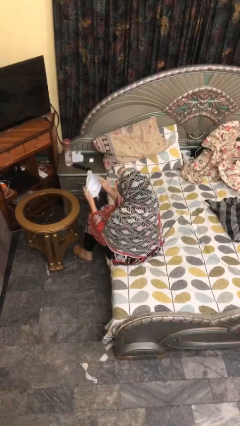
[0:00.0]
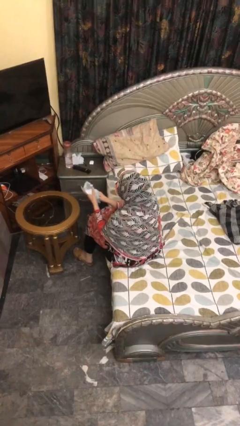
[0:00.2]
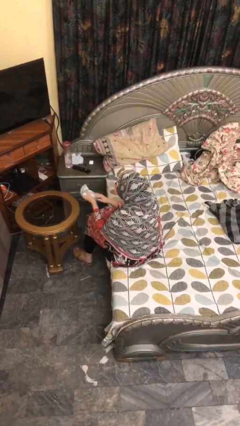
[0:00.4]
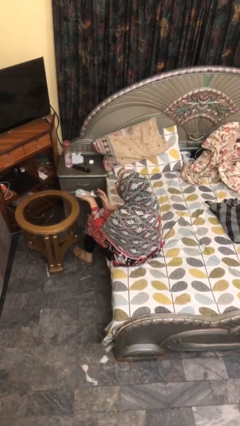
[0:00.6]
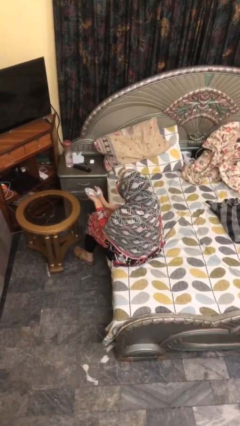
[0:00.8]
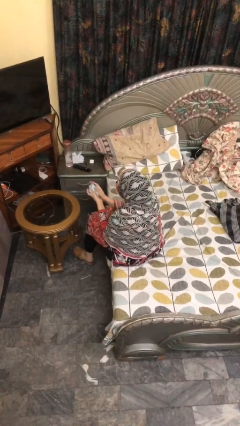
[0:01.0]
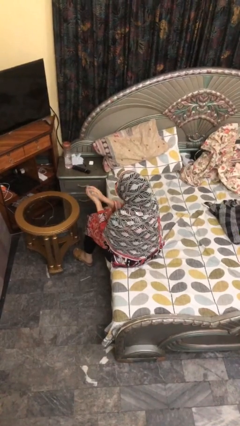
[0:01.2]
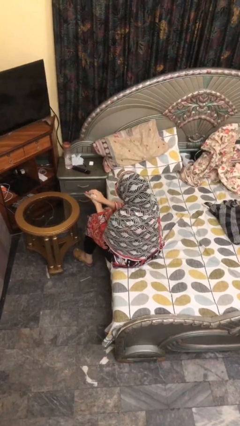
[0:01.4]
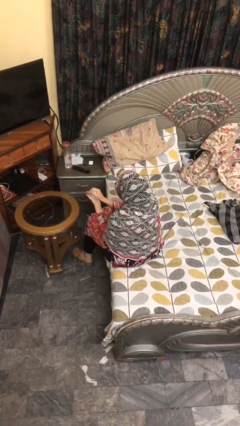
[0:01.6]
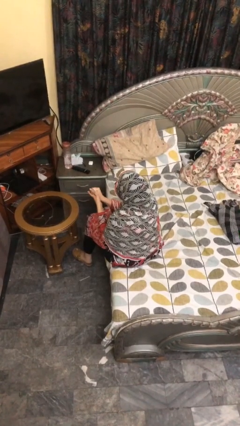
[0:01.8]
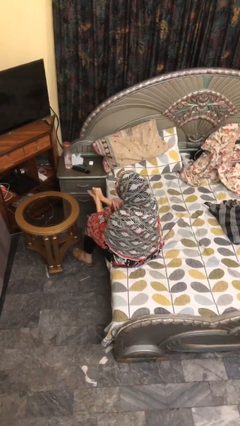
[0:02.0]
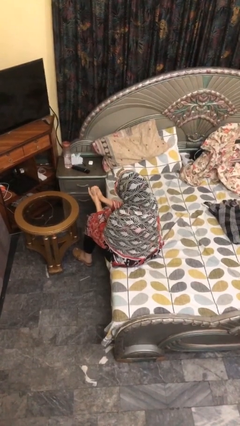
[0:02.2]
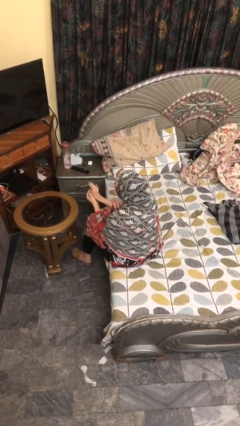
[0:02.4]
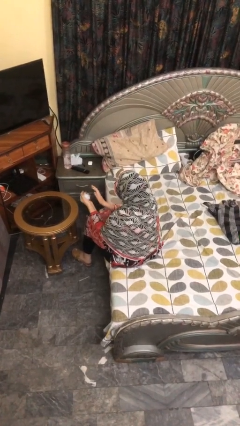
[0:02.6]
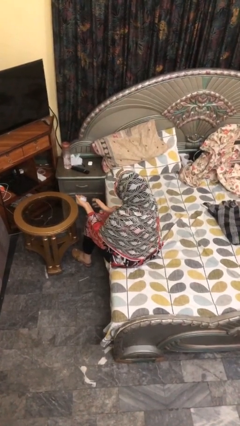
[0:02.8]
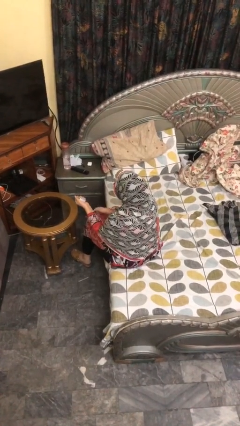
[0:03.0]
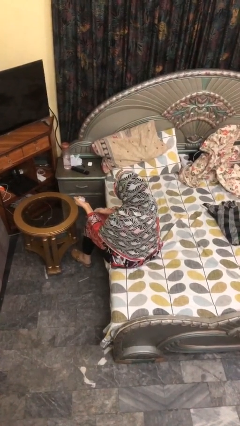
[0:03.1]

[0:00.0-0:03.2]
person crumples paper

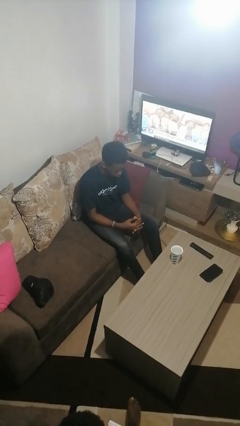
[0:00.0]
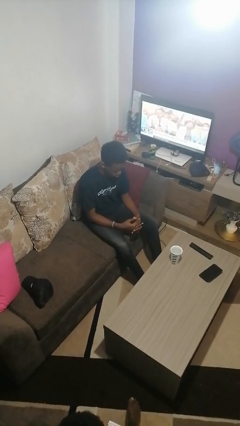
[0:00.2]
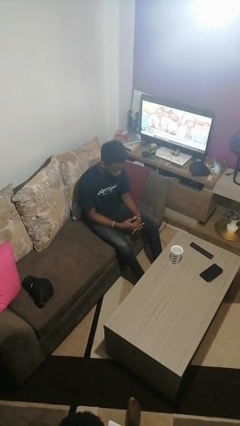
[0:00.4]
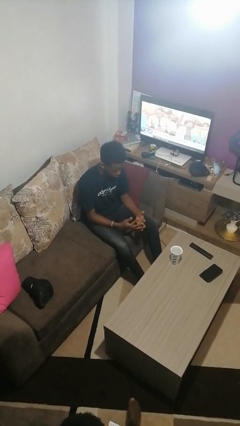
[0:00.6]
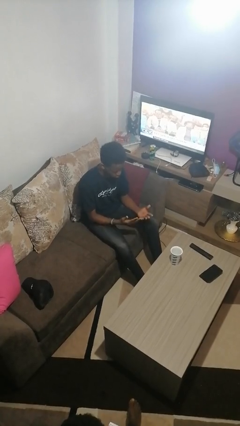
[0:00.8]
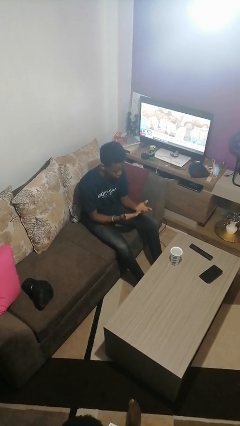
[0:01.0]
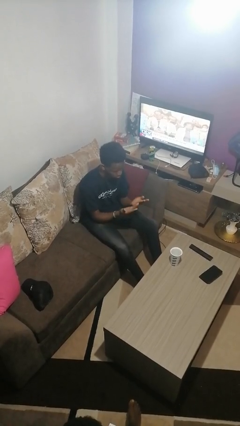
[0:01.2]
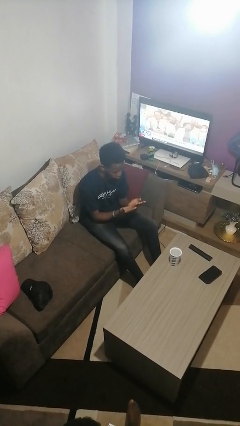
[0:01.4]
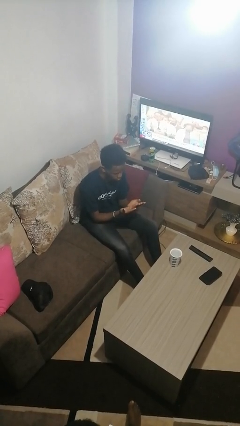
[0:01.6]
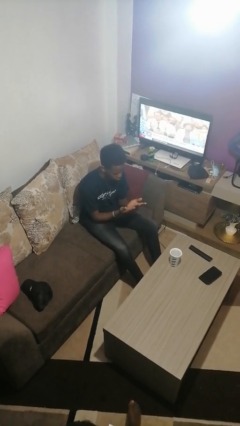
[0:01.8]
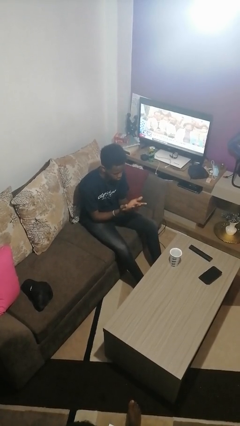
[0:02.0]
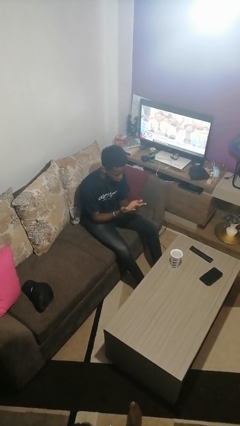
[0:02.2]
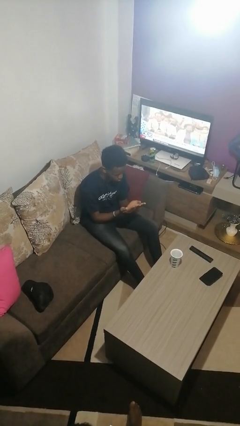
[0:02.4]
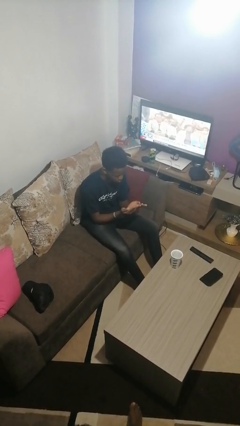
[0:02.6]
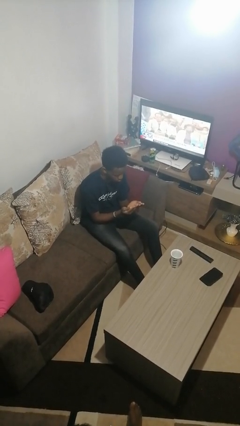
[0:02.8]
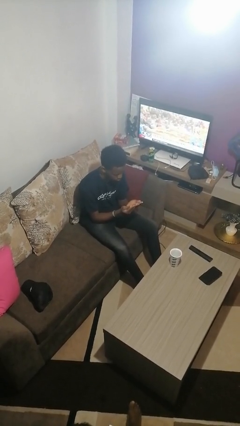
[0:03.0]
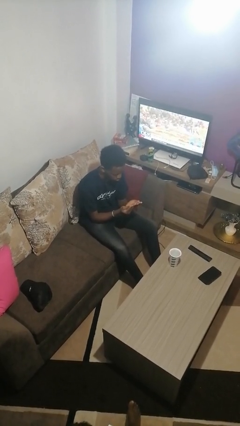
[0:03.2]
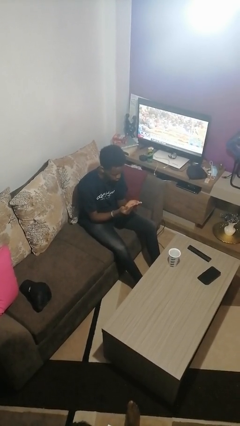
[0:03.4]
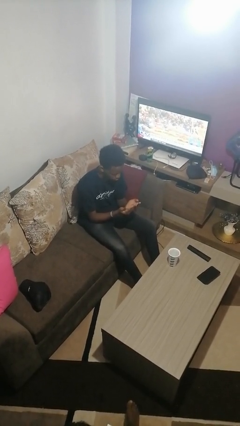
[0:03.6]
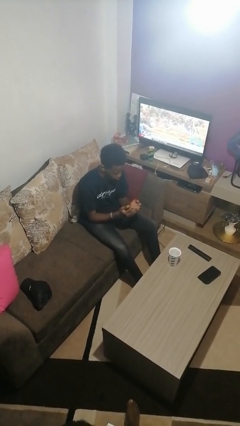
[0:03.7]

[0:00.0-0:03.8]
person looks at hands in lap

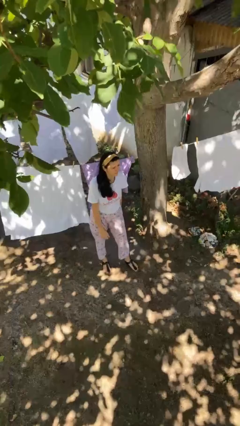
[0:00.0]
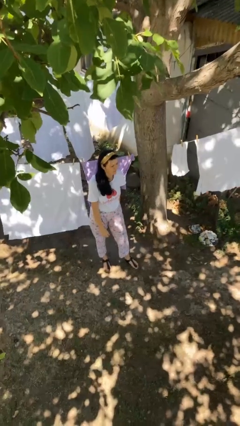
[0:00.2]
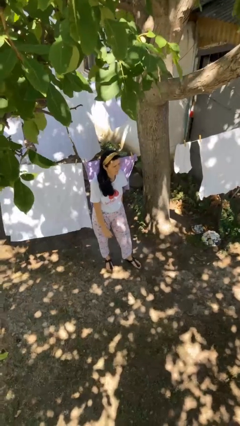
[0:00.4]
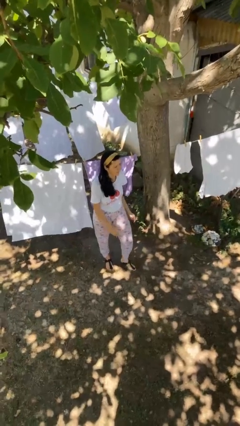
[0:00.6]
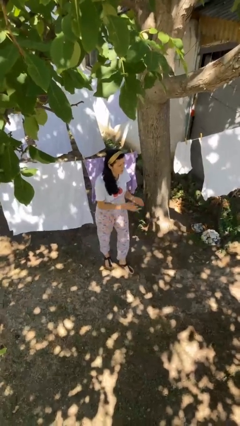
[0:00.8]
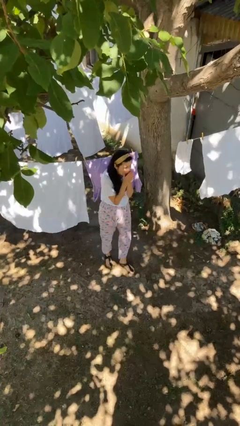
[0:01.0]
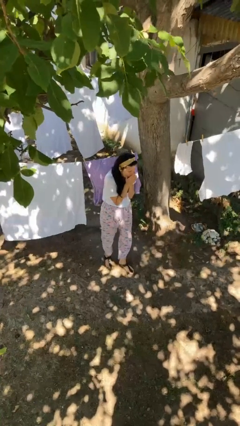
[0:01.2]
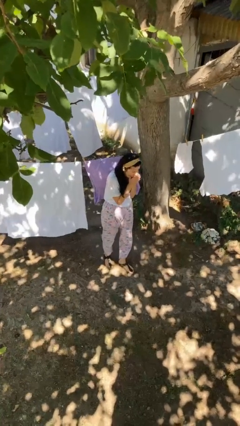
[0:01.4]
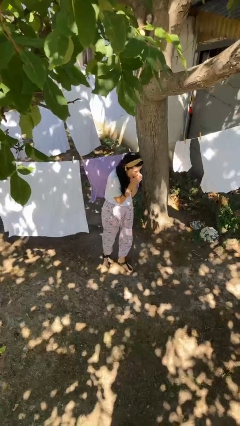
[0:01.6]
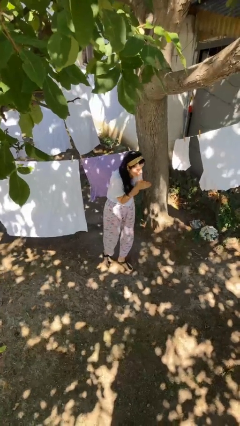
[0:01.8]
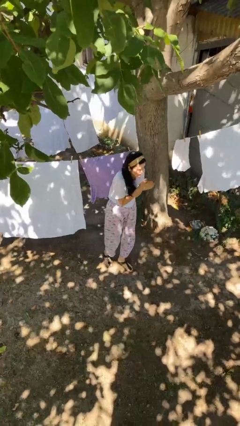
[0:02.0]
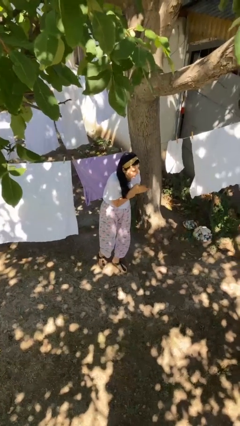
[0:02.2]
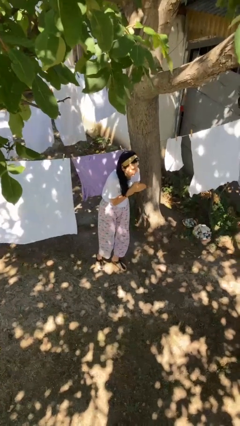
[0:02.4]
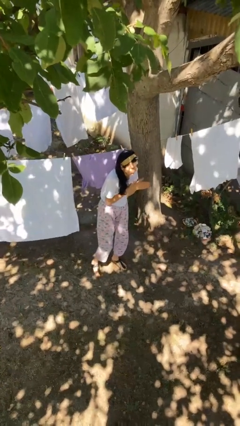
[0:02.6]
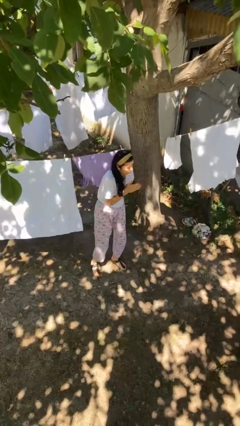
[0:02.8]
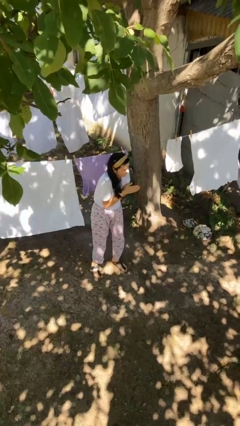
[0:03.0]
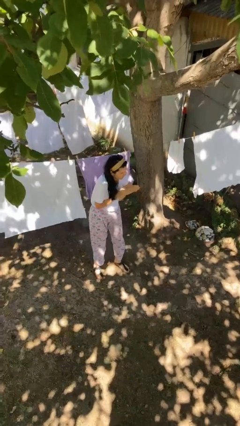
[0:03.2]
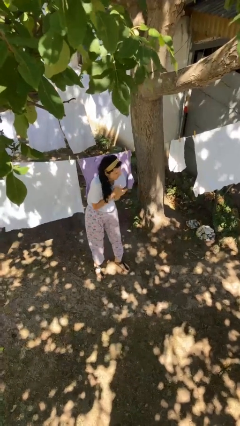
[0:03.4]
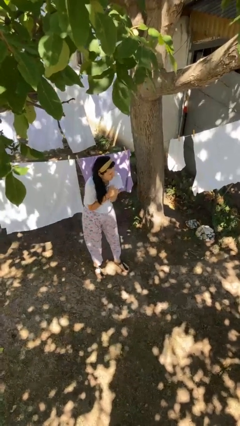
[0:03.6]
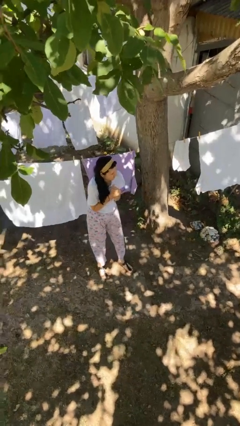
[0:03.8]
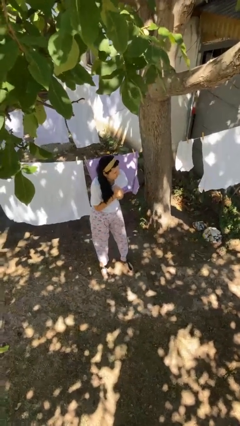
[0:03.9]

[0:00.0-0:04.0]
person blows into hands

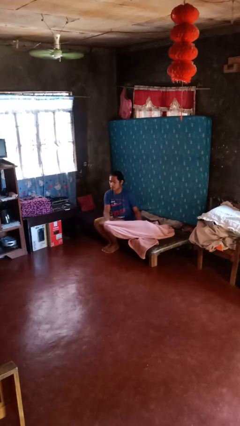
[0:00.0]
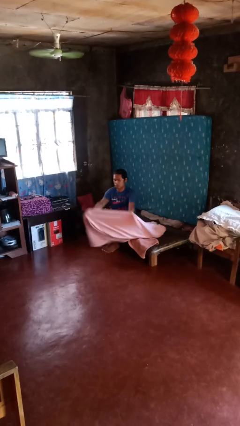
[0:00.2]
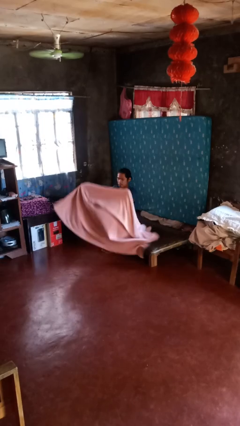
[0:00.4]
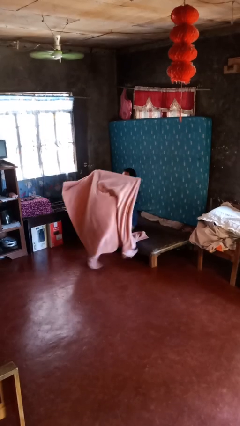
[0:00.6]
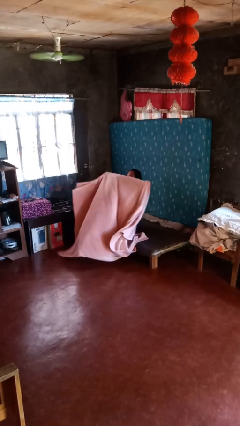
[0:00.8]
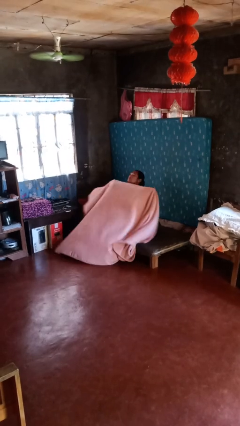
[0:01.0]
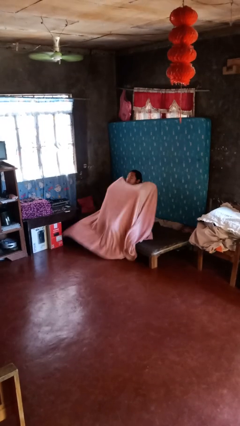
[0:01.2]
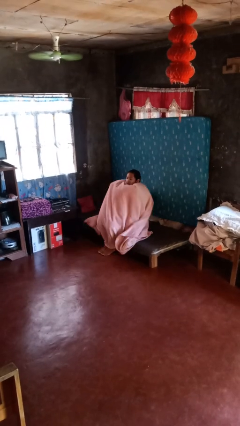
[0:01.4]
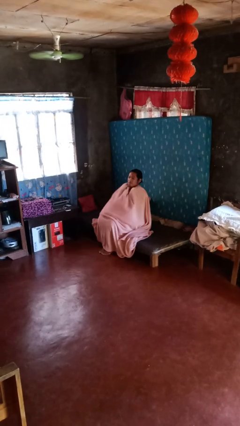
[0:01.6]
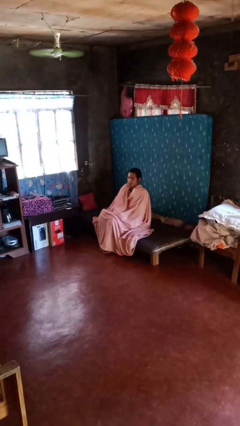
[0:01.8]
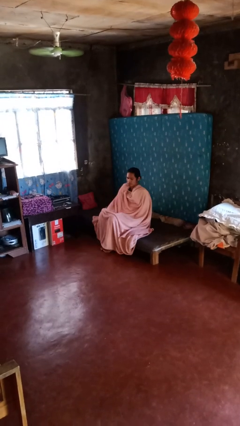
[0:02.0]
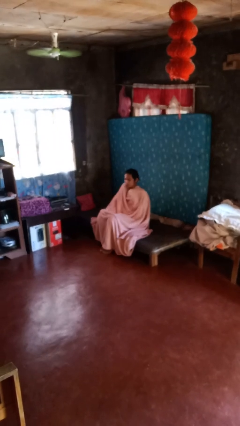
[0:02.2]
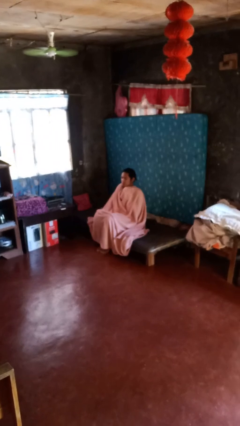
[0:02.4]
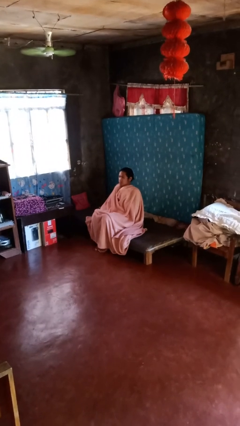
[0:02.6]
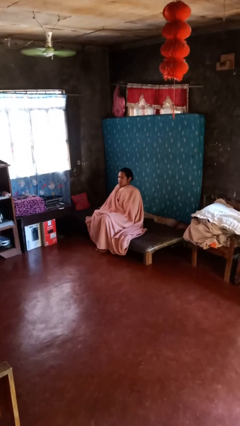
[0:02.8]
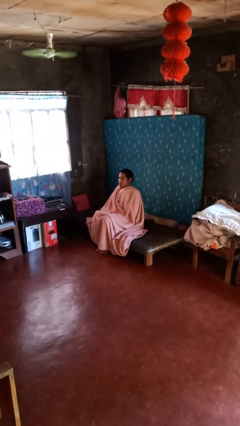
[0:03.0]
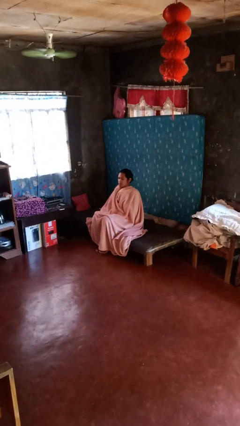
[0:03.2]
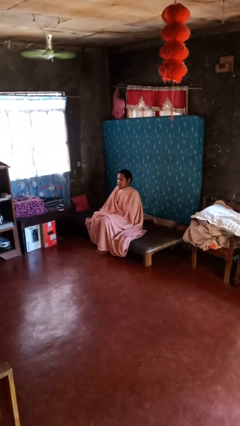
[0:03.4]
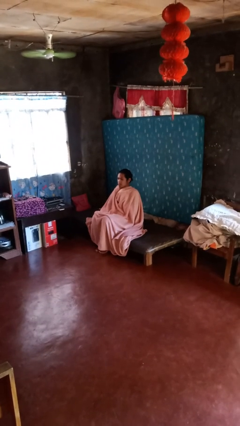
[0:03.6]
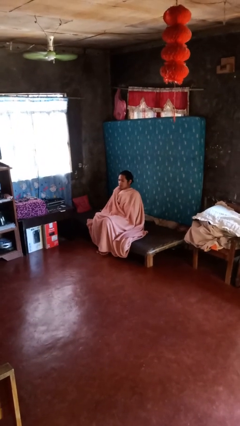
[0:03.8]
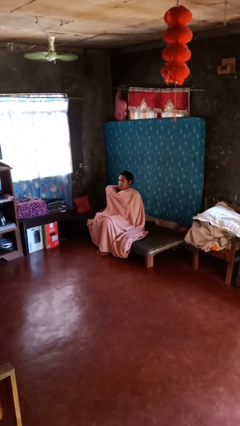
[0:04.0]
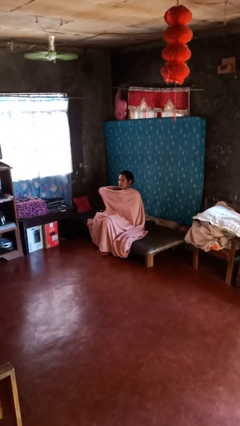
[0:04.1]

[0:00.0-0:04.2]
person covers with blanket

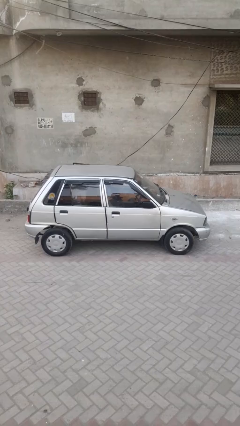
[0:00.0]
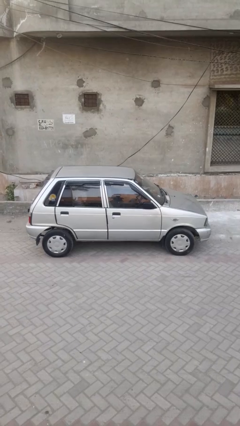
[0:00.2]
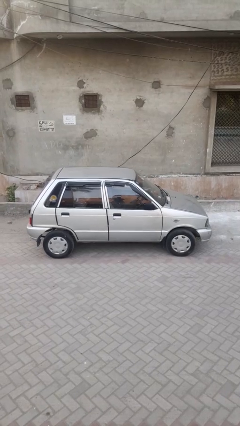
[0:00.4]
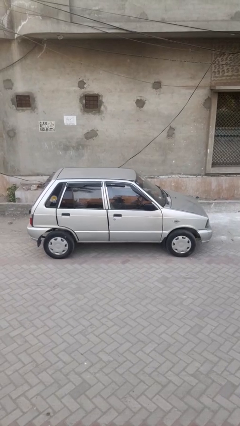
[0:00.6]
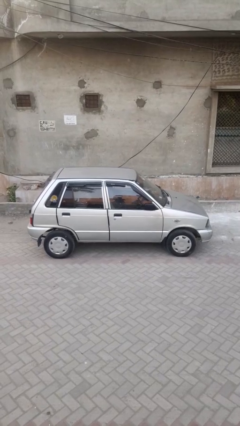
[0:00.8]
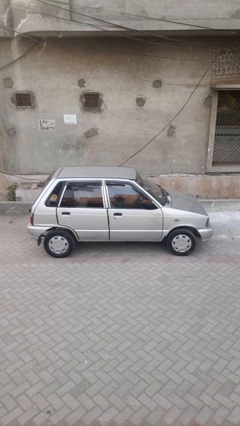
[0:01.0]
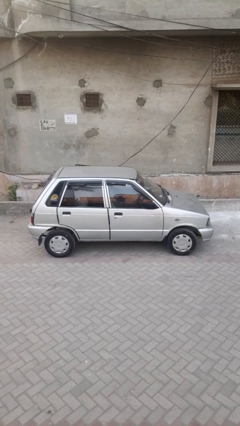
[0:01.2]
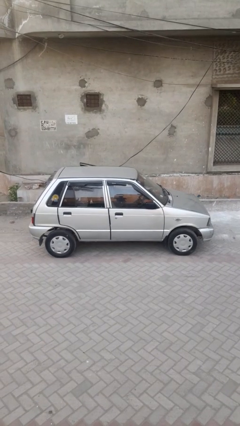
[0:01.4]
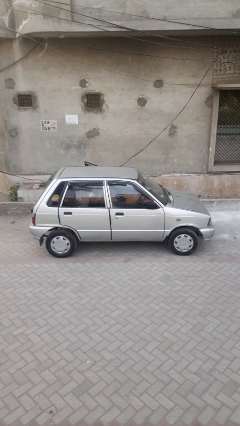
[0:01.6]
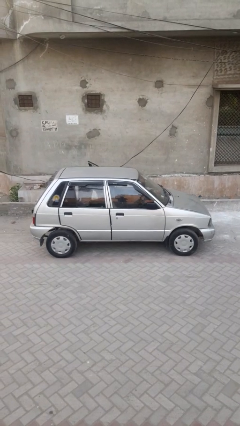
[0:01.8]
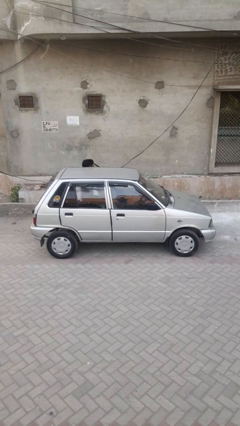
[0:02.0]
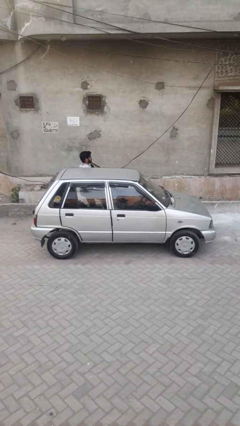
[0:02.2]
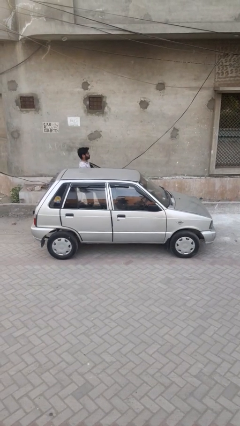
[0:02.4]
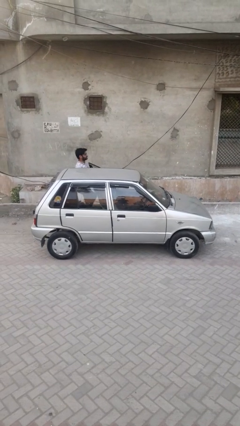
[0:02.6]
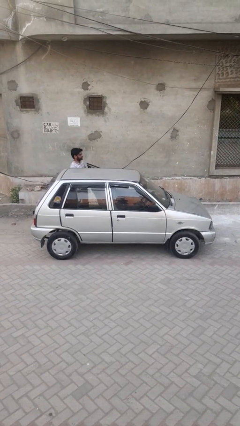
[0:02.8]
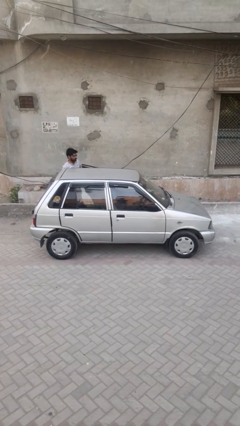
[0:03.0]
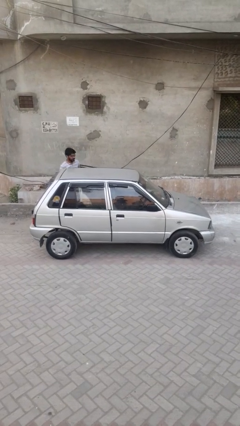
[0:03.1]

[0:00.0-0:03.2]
car drops off person
